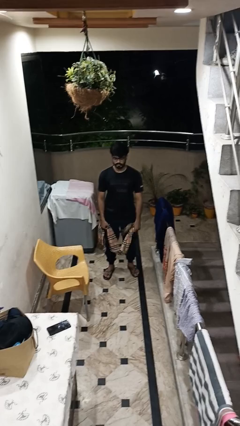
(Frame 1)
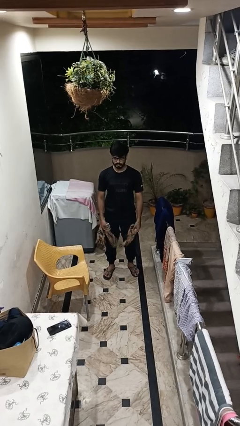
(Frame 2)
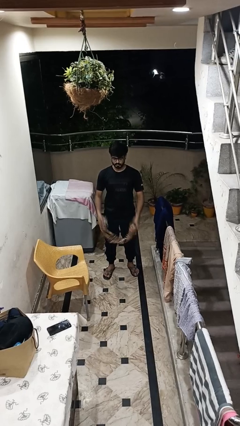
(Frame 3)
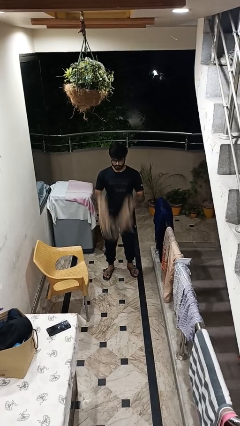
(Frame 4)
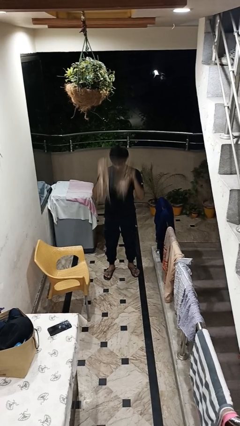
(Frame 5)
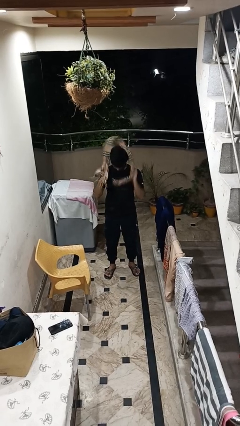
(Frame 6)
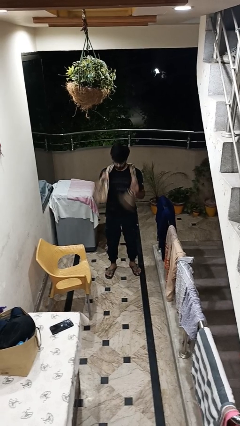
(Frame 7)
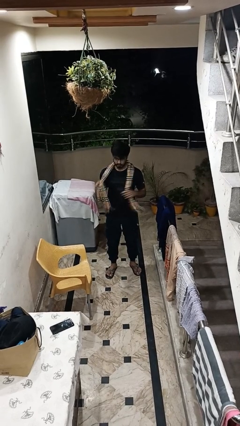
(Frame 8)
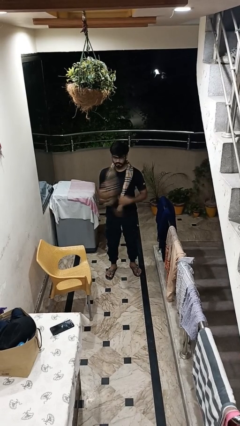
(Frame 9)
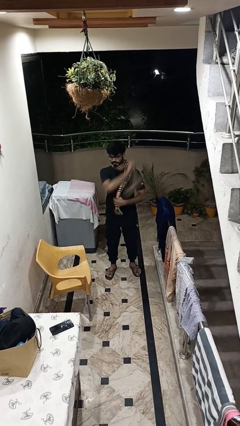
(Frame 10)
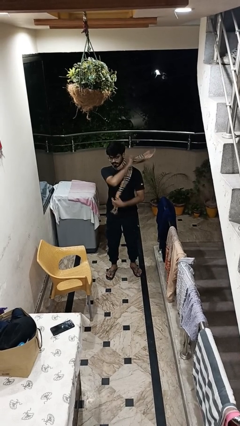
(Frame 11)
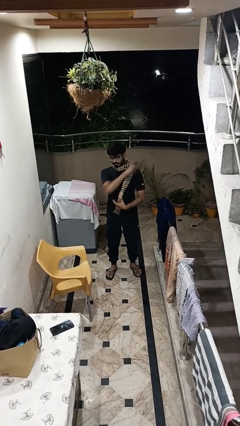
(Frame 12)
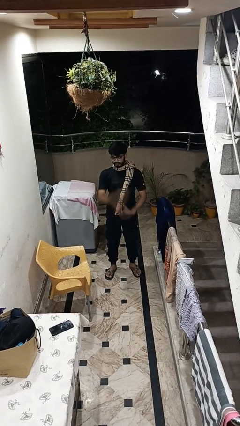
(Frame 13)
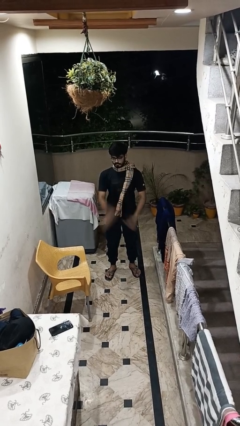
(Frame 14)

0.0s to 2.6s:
person puts on scarf

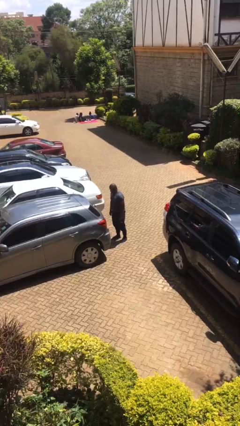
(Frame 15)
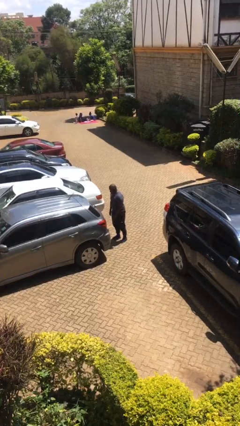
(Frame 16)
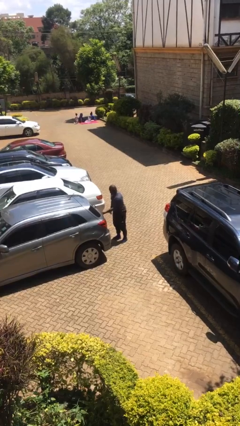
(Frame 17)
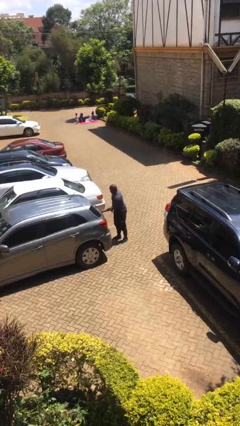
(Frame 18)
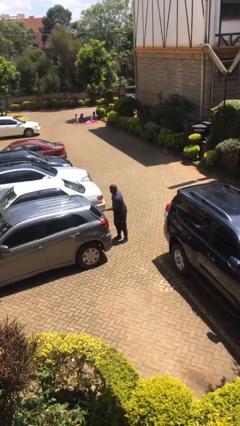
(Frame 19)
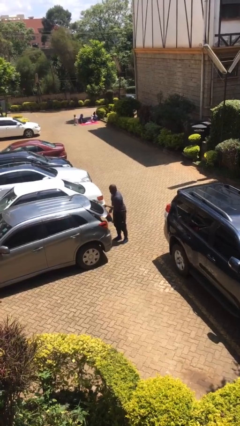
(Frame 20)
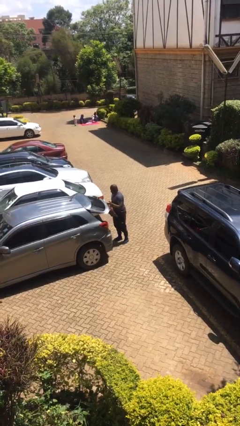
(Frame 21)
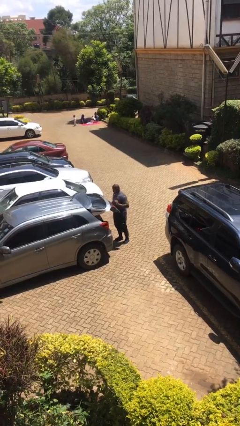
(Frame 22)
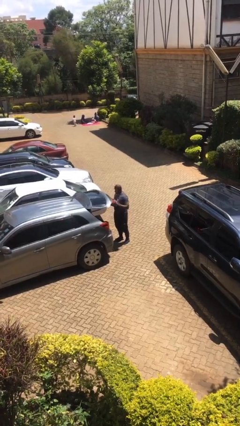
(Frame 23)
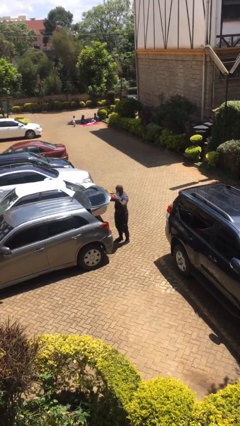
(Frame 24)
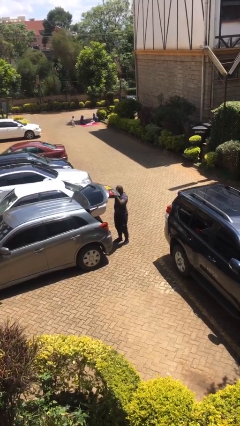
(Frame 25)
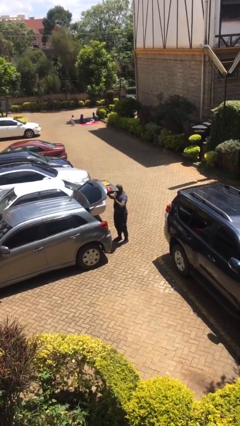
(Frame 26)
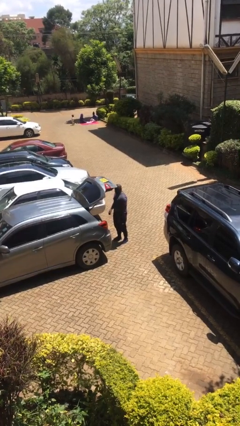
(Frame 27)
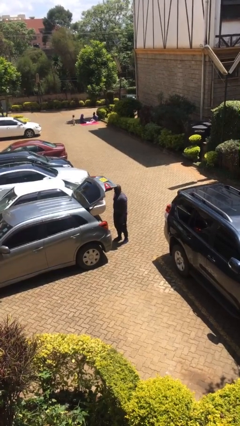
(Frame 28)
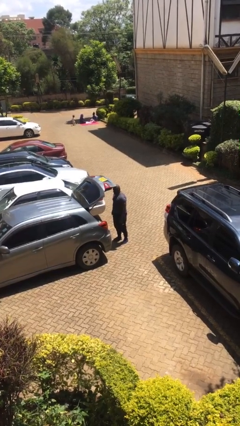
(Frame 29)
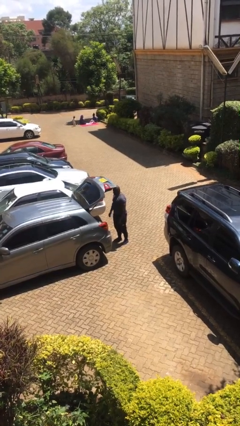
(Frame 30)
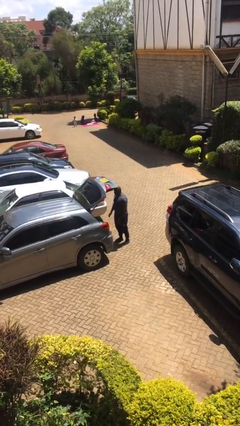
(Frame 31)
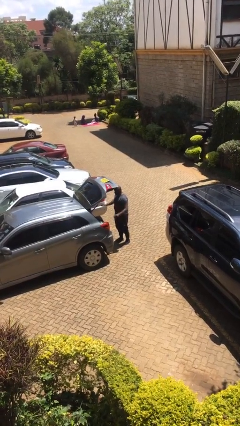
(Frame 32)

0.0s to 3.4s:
person opens car trunk

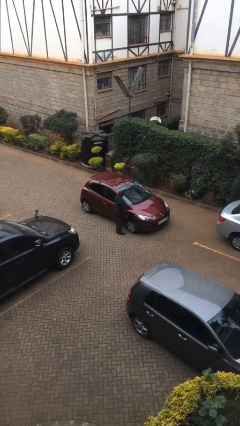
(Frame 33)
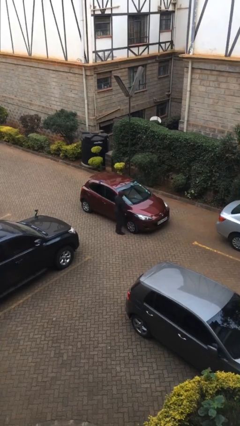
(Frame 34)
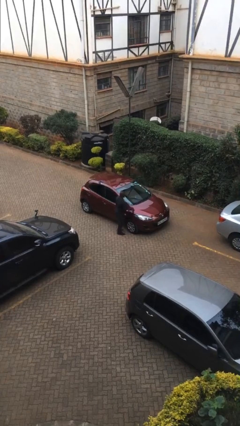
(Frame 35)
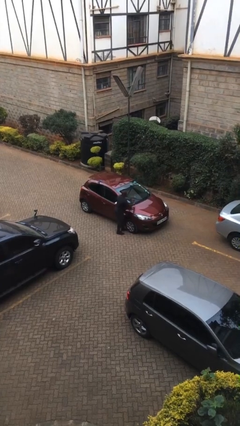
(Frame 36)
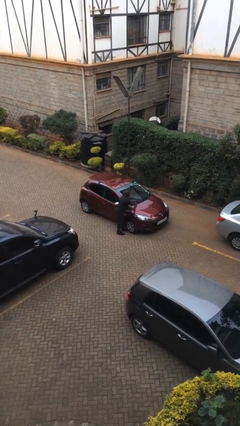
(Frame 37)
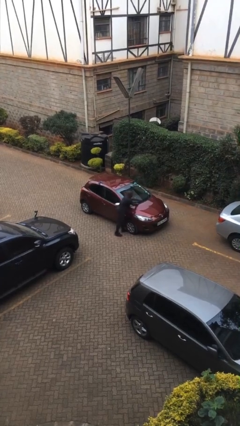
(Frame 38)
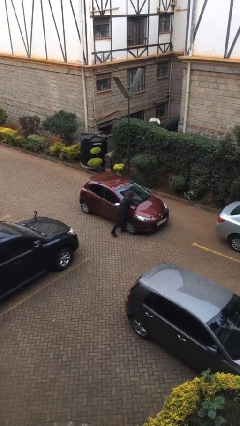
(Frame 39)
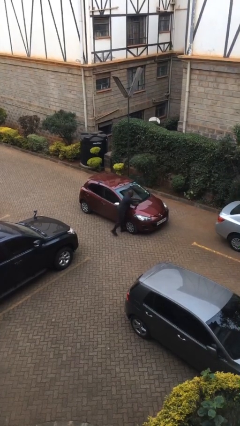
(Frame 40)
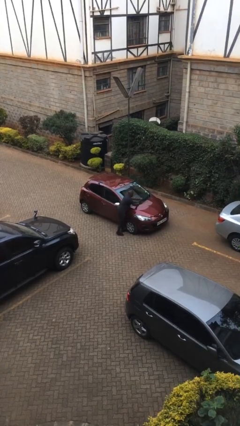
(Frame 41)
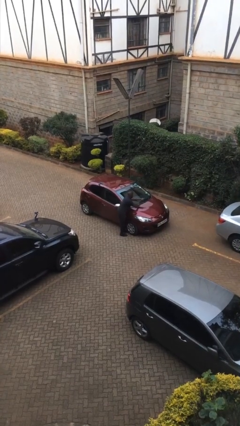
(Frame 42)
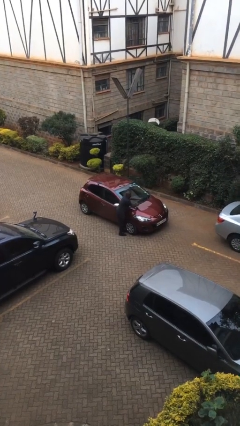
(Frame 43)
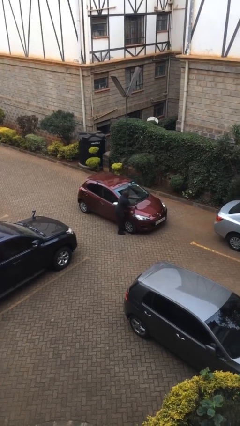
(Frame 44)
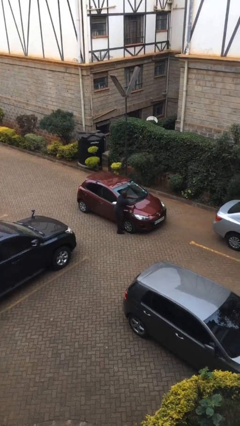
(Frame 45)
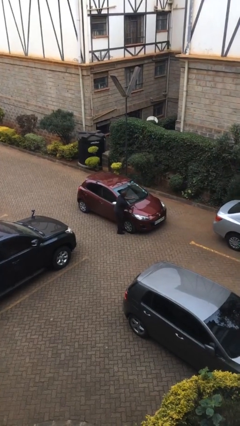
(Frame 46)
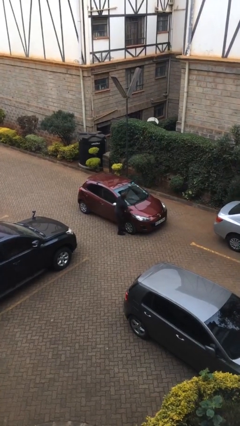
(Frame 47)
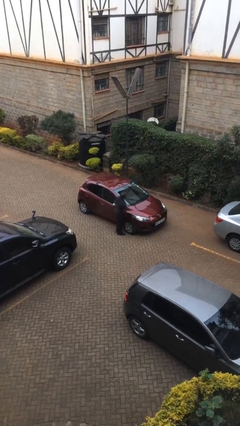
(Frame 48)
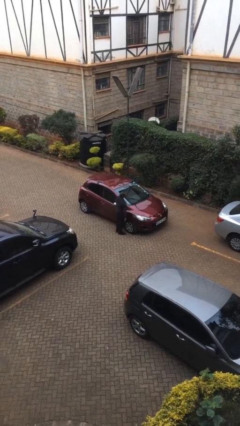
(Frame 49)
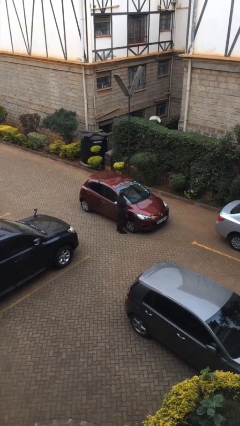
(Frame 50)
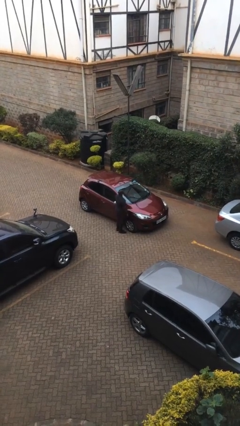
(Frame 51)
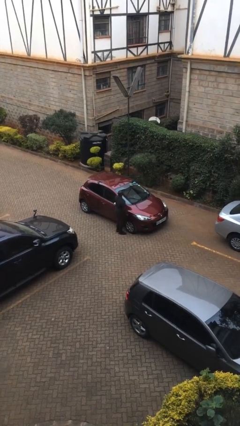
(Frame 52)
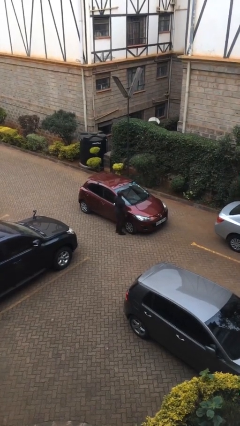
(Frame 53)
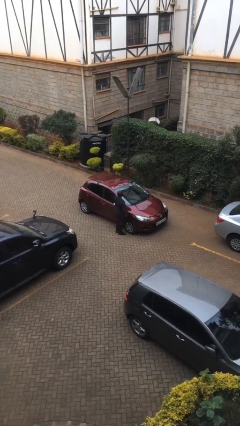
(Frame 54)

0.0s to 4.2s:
person flips up car wipers

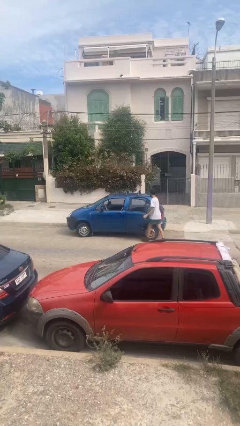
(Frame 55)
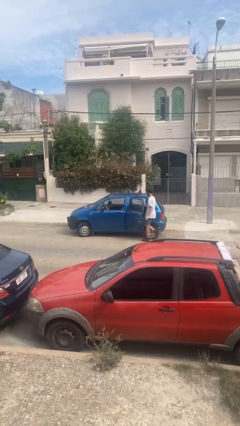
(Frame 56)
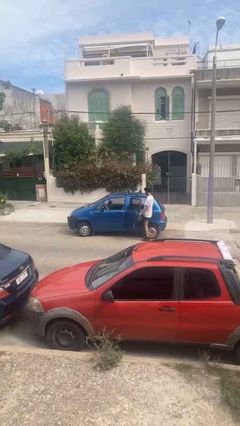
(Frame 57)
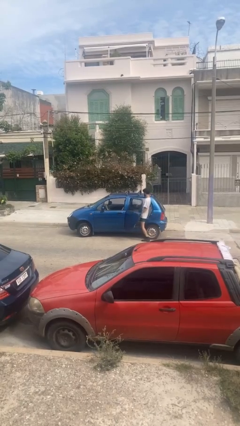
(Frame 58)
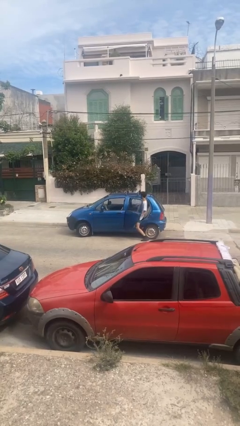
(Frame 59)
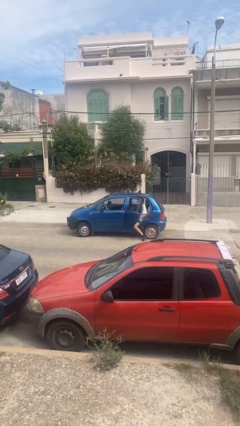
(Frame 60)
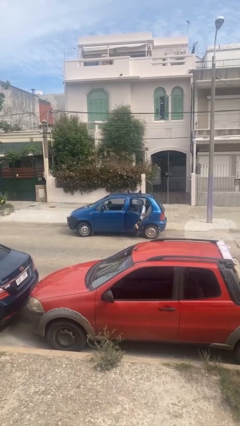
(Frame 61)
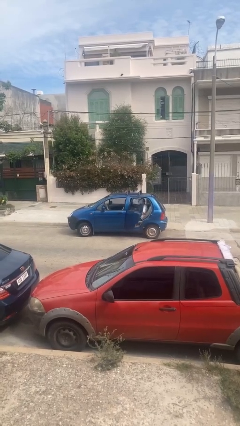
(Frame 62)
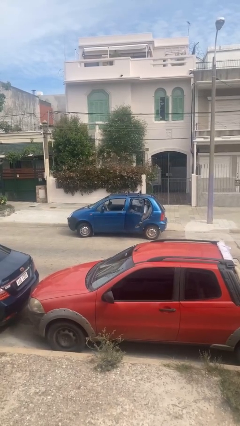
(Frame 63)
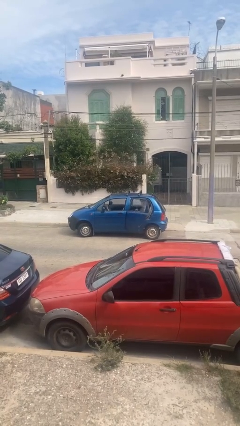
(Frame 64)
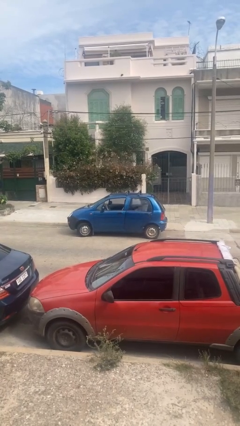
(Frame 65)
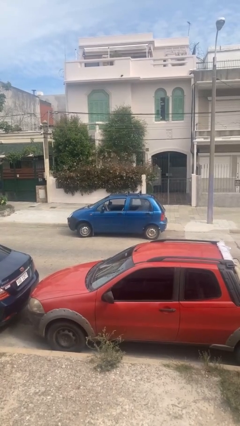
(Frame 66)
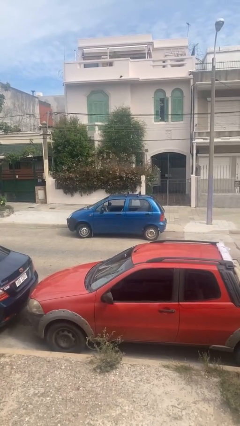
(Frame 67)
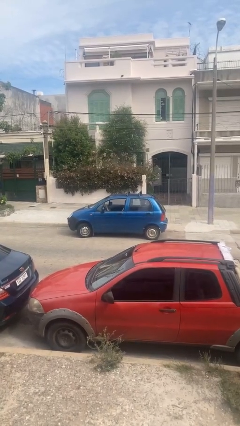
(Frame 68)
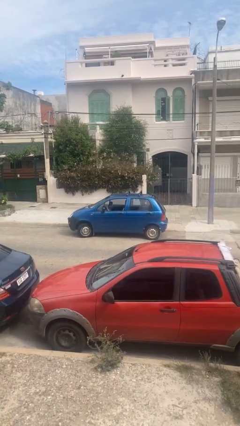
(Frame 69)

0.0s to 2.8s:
car picks up person

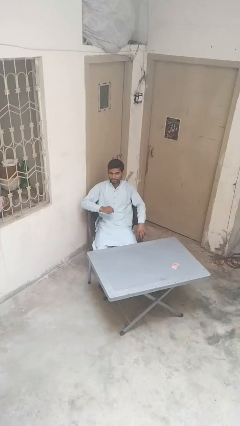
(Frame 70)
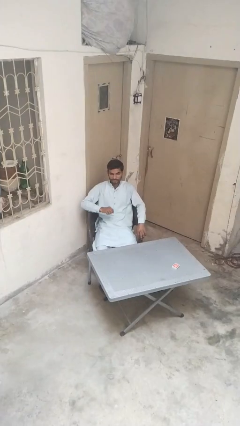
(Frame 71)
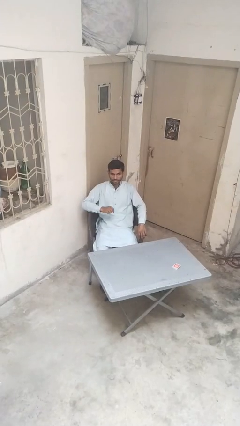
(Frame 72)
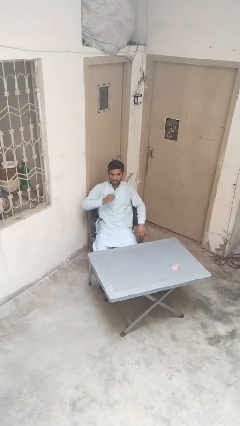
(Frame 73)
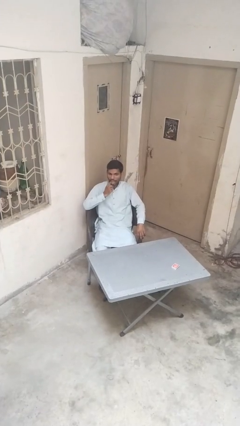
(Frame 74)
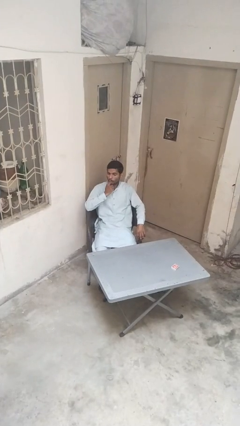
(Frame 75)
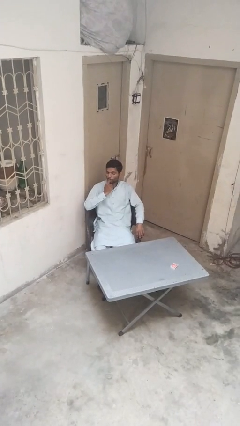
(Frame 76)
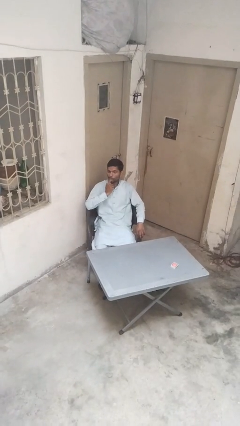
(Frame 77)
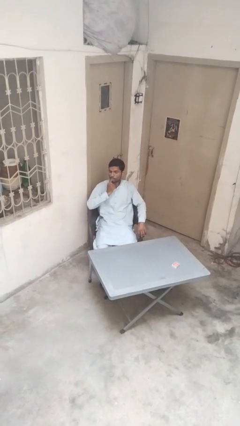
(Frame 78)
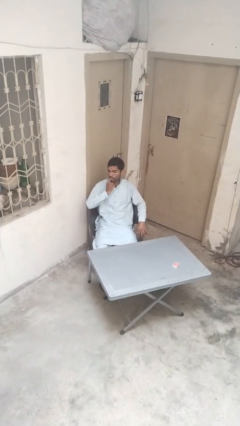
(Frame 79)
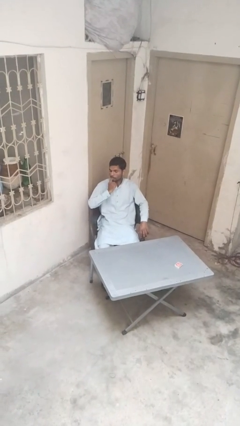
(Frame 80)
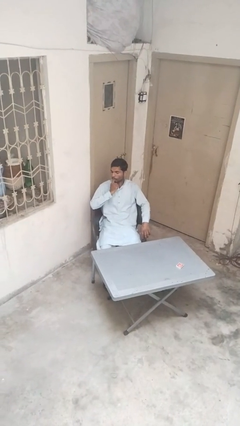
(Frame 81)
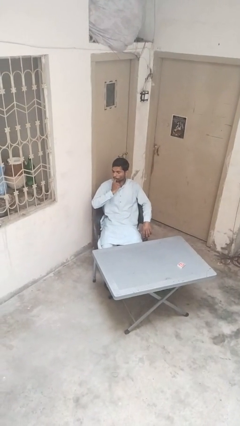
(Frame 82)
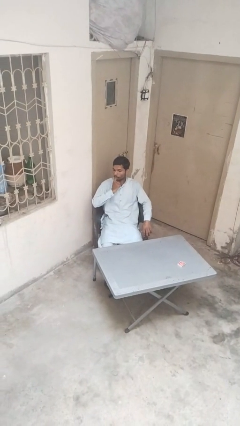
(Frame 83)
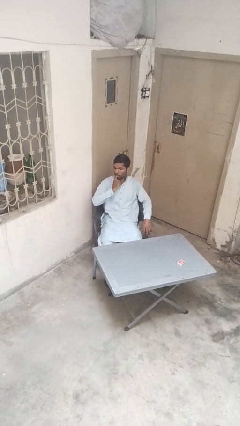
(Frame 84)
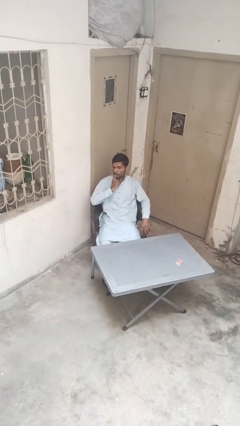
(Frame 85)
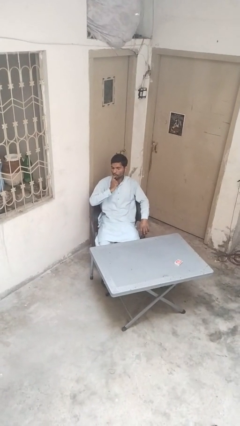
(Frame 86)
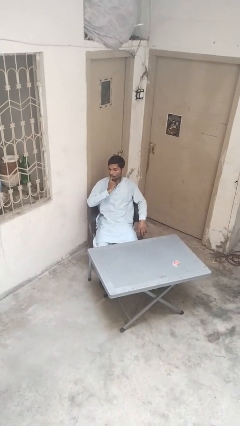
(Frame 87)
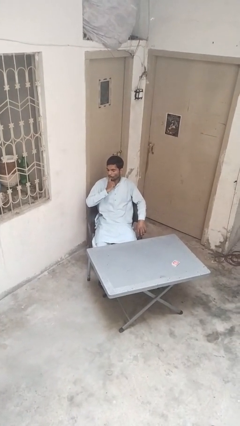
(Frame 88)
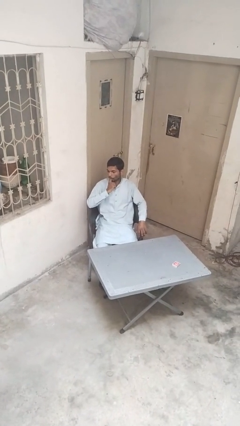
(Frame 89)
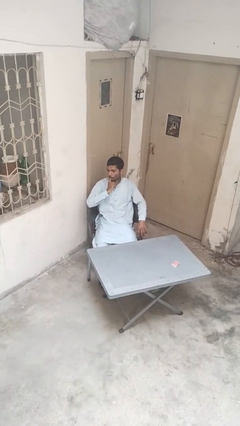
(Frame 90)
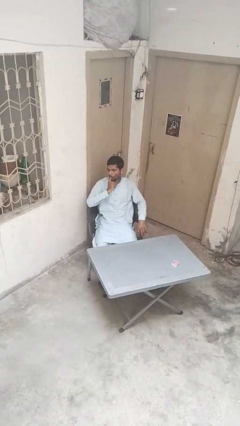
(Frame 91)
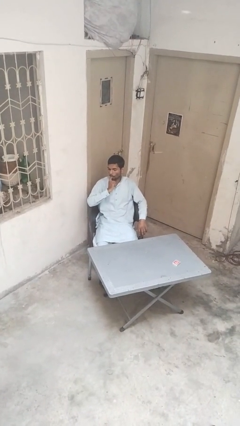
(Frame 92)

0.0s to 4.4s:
person licks fingers

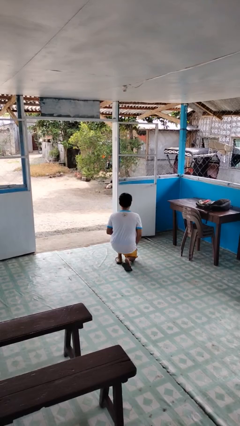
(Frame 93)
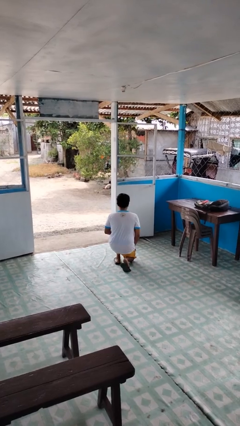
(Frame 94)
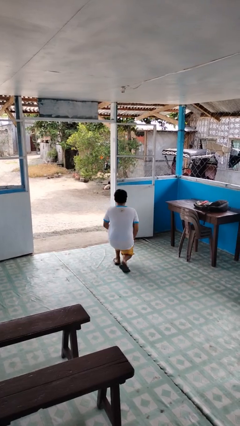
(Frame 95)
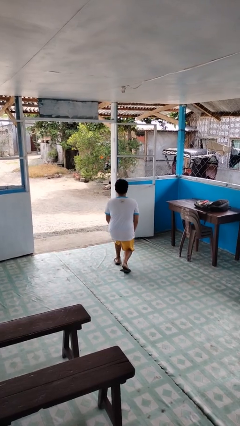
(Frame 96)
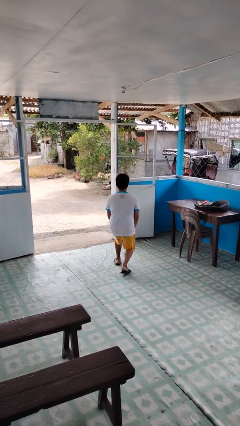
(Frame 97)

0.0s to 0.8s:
person stands up from floor
